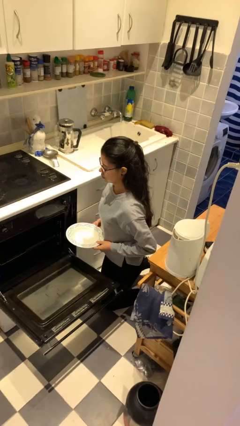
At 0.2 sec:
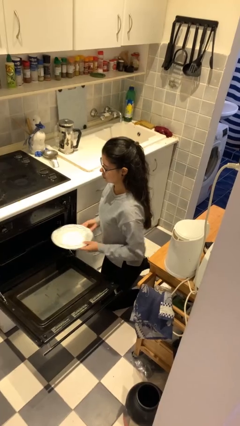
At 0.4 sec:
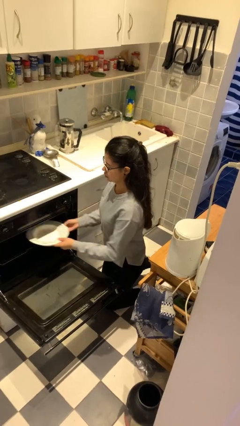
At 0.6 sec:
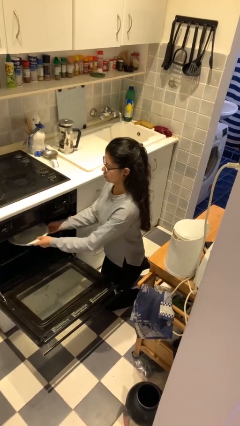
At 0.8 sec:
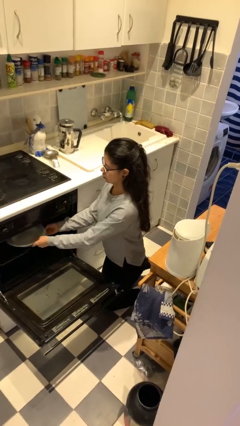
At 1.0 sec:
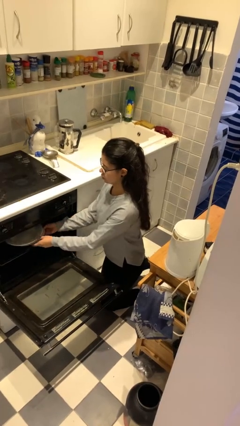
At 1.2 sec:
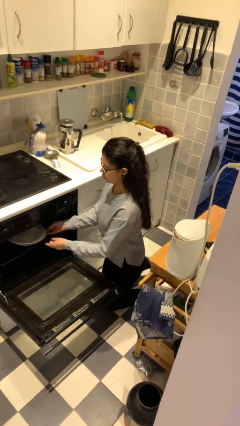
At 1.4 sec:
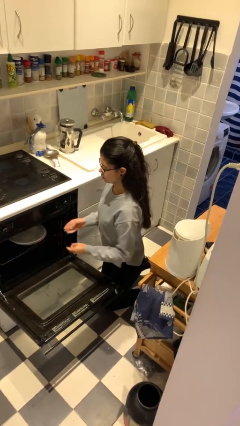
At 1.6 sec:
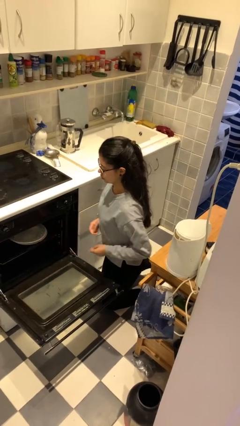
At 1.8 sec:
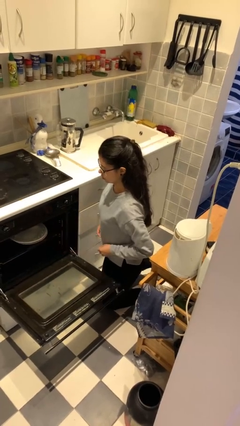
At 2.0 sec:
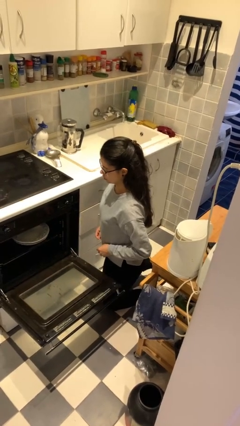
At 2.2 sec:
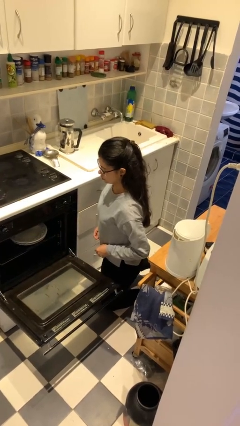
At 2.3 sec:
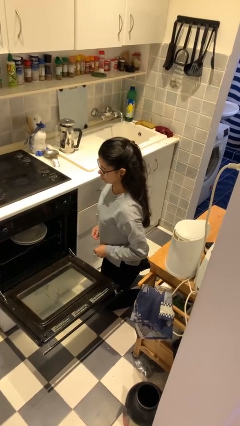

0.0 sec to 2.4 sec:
person loads dishwasher

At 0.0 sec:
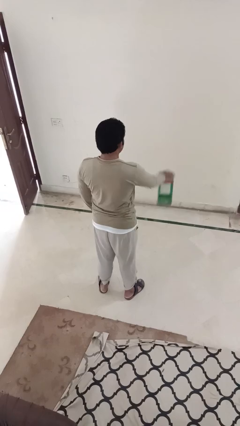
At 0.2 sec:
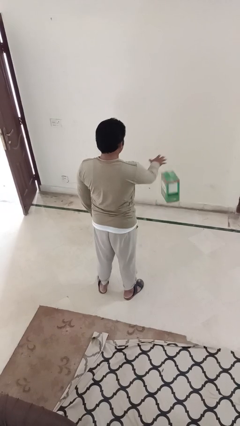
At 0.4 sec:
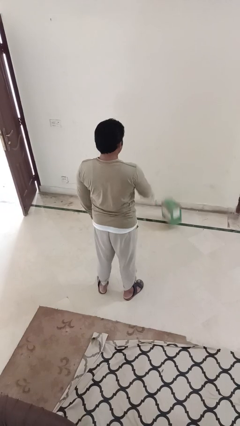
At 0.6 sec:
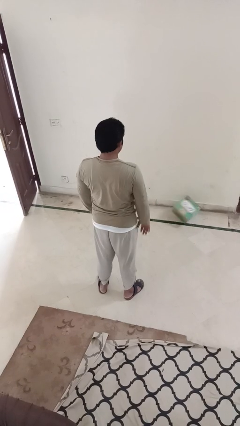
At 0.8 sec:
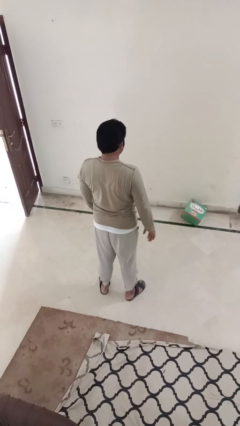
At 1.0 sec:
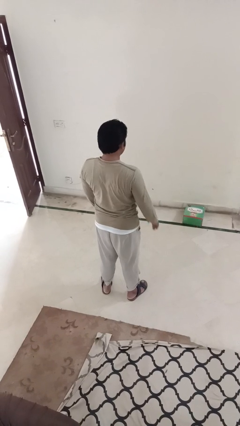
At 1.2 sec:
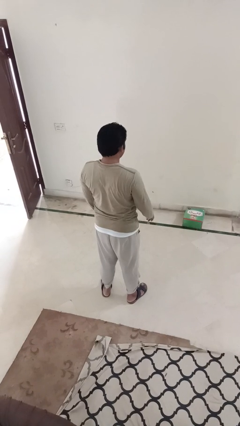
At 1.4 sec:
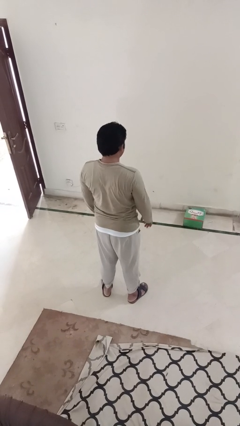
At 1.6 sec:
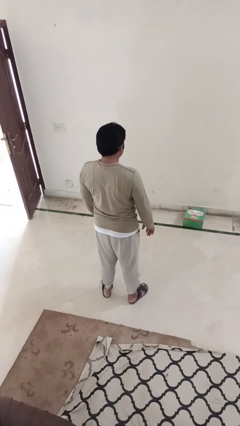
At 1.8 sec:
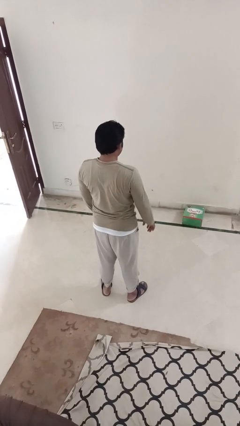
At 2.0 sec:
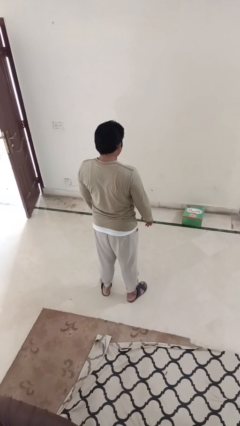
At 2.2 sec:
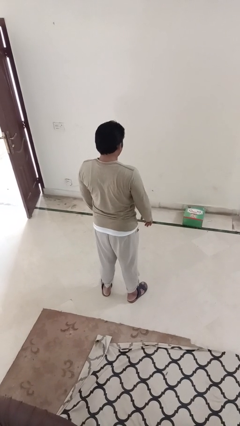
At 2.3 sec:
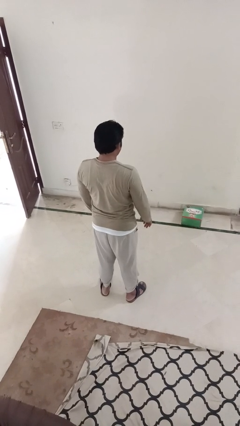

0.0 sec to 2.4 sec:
person throws object to ground

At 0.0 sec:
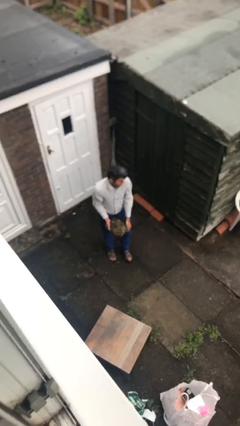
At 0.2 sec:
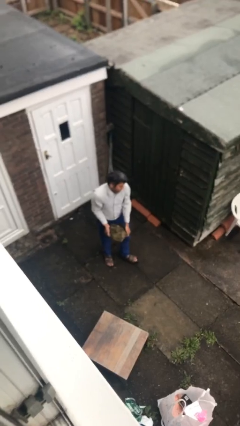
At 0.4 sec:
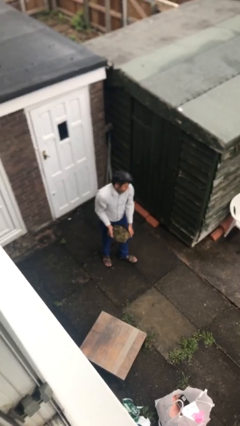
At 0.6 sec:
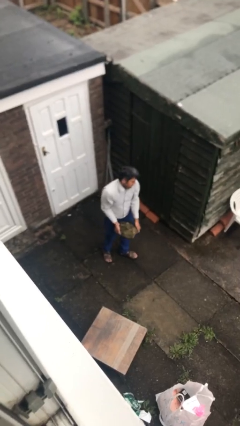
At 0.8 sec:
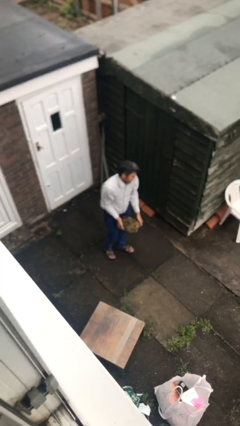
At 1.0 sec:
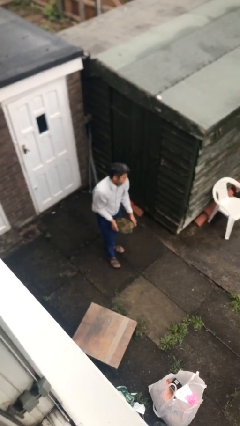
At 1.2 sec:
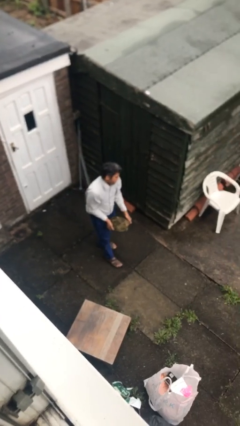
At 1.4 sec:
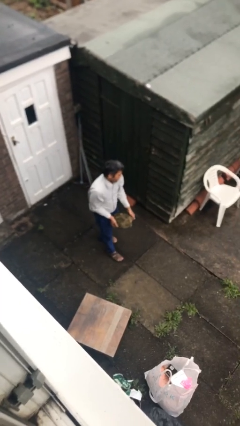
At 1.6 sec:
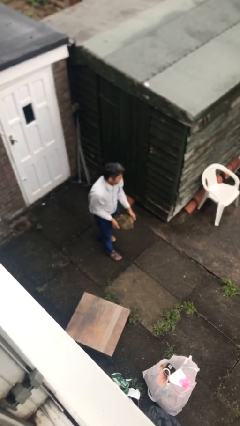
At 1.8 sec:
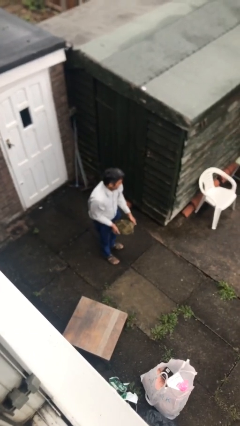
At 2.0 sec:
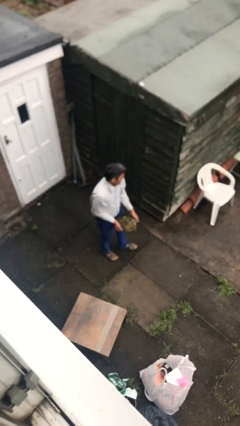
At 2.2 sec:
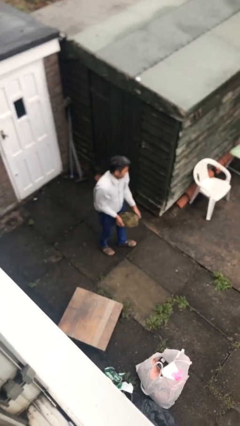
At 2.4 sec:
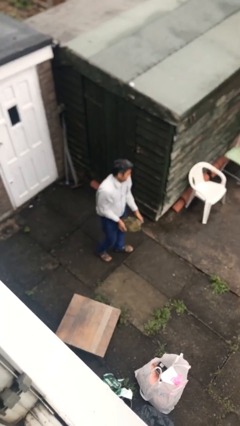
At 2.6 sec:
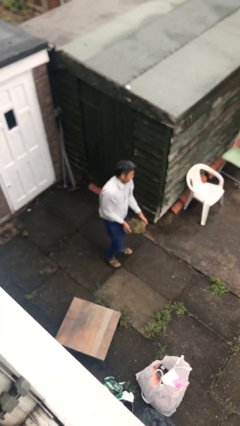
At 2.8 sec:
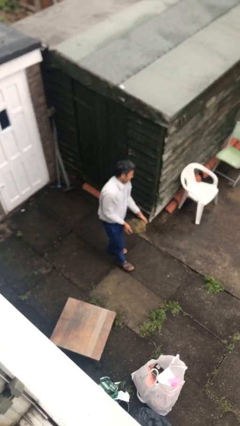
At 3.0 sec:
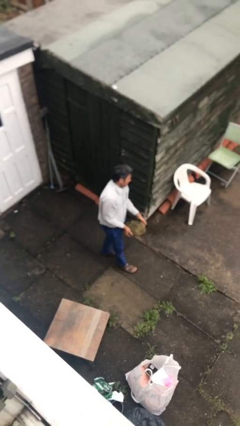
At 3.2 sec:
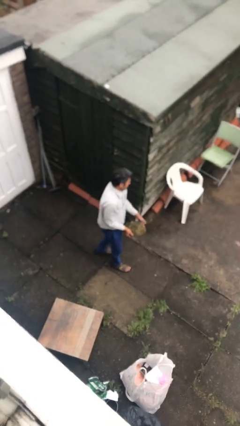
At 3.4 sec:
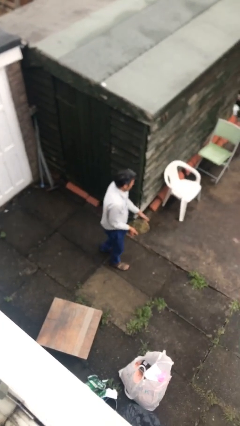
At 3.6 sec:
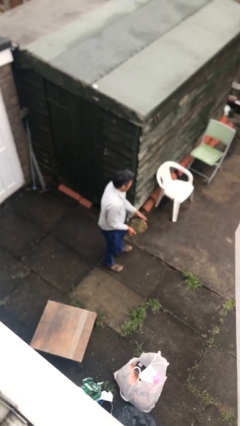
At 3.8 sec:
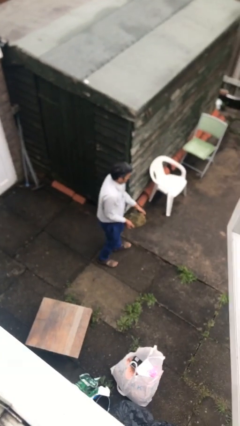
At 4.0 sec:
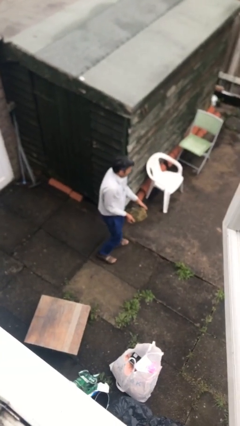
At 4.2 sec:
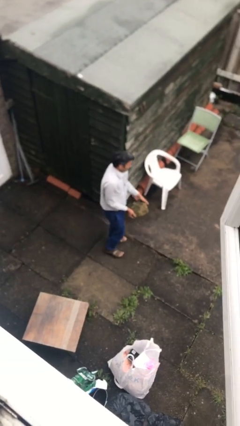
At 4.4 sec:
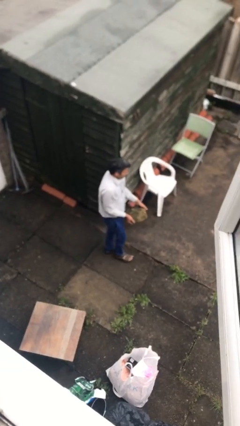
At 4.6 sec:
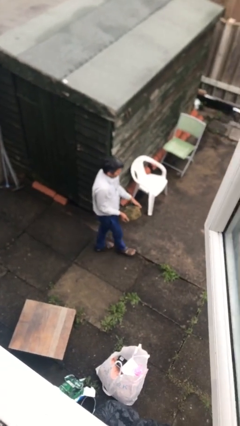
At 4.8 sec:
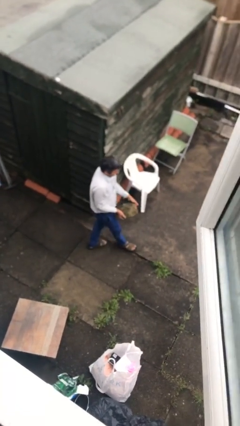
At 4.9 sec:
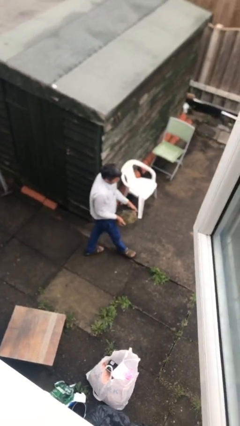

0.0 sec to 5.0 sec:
person carries heavy object

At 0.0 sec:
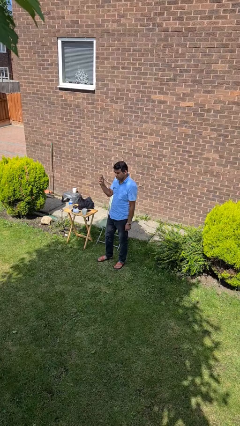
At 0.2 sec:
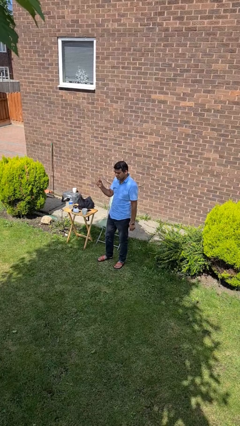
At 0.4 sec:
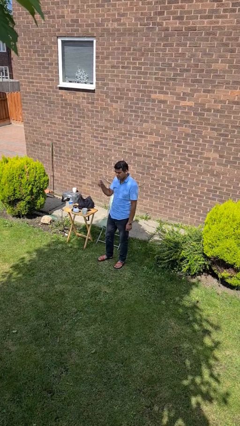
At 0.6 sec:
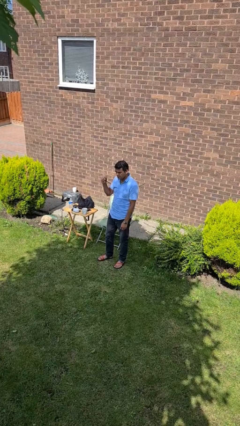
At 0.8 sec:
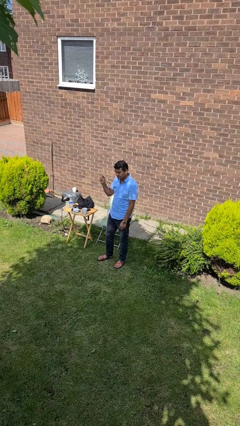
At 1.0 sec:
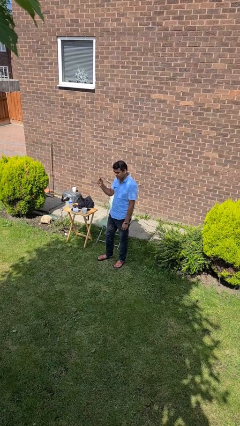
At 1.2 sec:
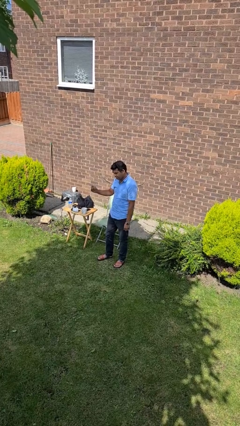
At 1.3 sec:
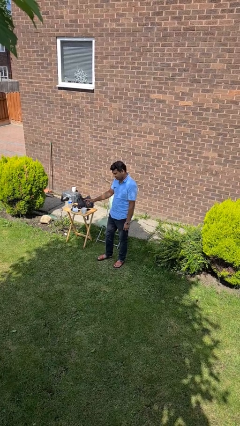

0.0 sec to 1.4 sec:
person snaps fingers

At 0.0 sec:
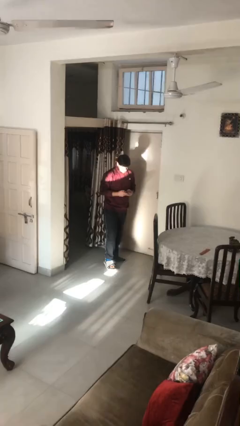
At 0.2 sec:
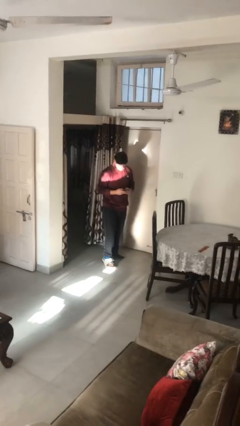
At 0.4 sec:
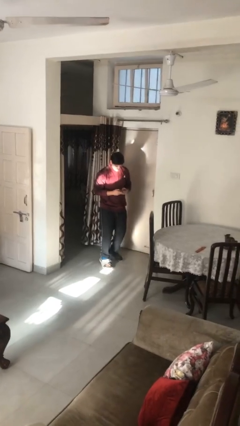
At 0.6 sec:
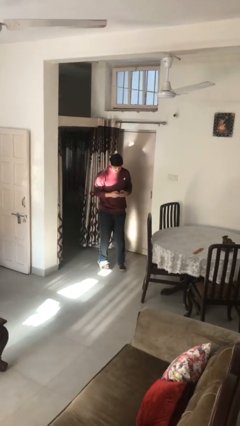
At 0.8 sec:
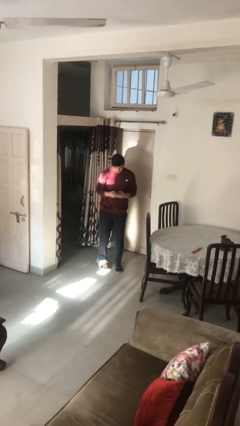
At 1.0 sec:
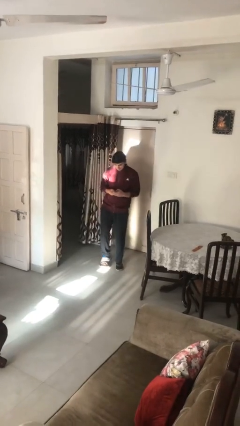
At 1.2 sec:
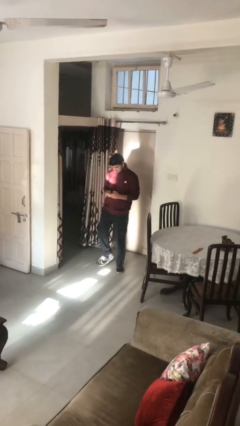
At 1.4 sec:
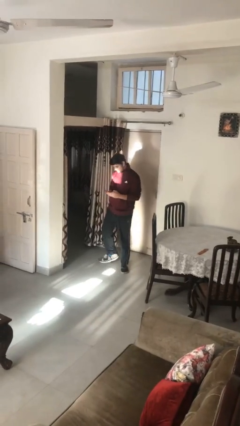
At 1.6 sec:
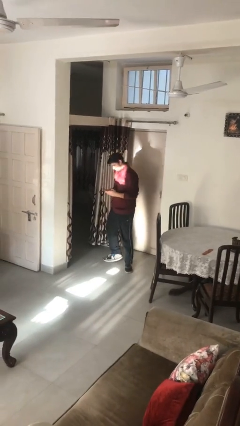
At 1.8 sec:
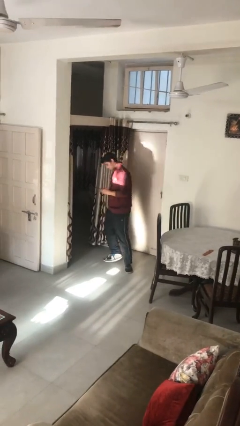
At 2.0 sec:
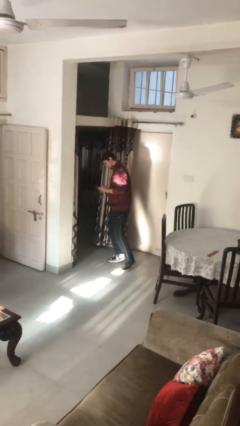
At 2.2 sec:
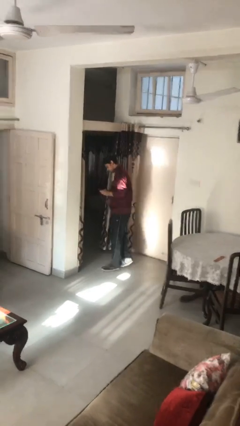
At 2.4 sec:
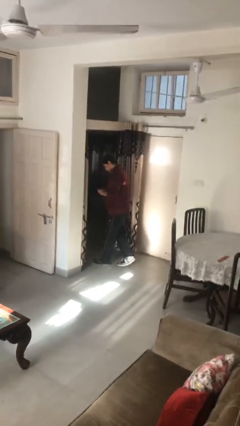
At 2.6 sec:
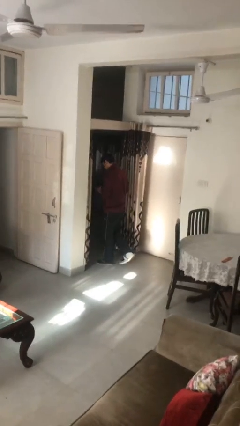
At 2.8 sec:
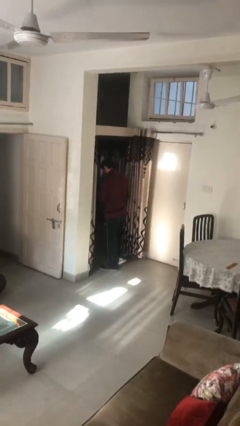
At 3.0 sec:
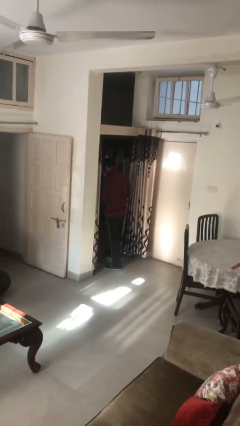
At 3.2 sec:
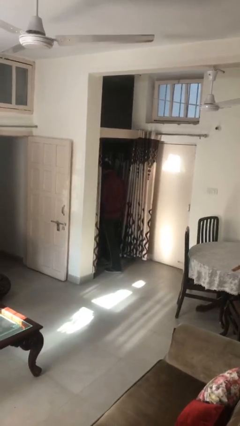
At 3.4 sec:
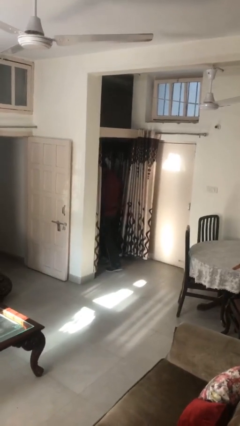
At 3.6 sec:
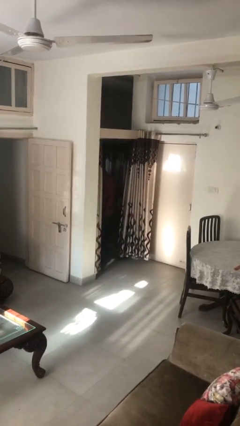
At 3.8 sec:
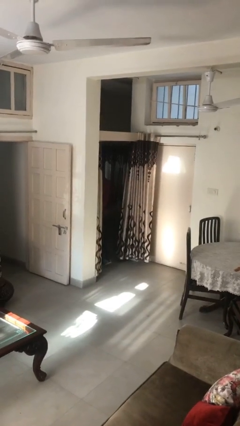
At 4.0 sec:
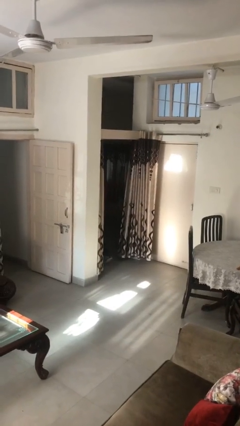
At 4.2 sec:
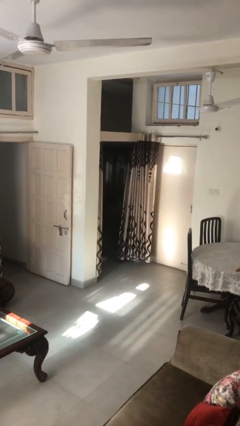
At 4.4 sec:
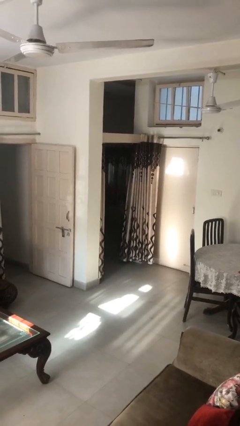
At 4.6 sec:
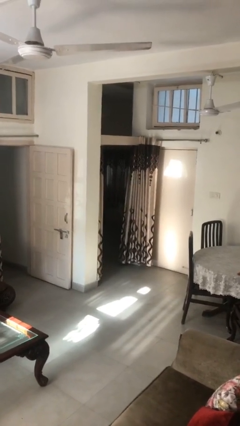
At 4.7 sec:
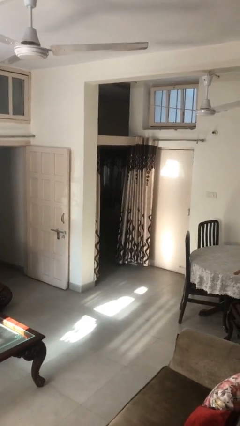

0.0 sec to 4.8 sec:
person exits scene through structure

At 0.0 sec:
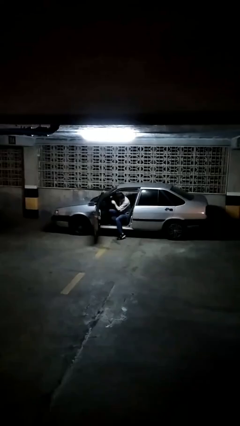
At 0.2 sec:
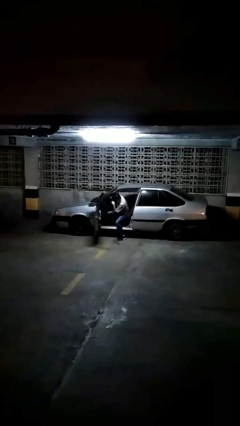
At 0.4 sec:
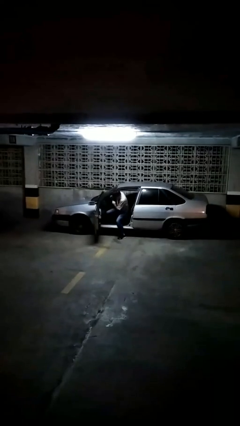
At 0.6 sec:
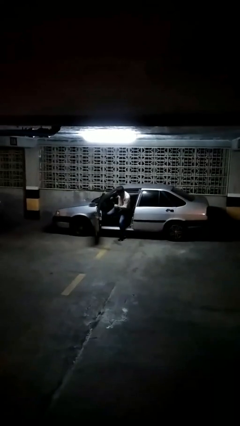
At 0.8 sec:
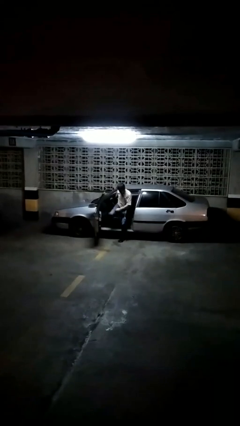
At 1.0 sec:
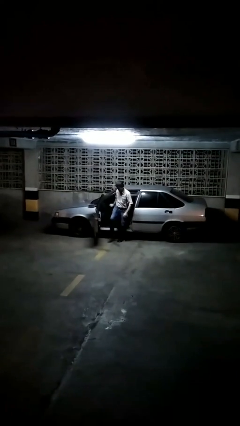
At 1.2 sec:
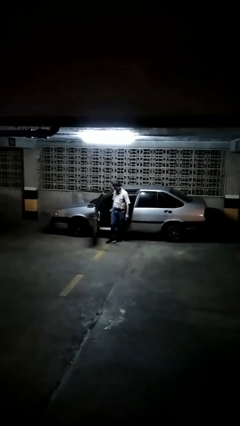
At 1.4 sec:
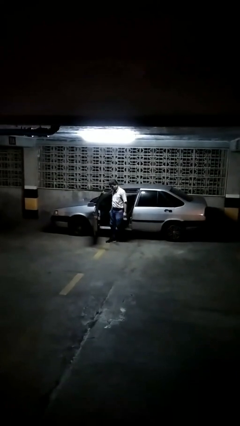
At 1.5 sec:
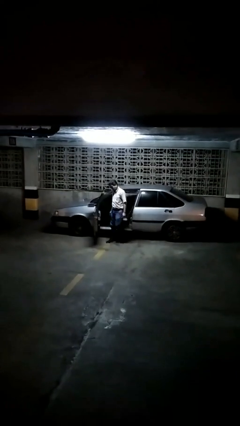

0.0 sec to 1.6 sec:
person exits car
